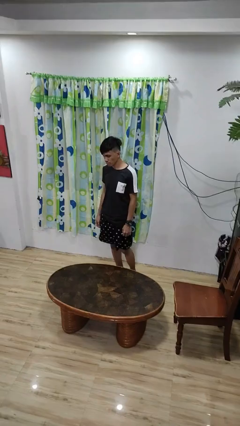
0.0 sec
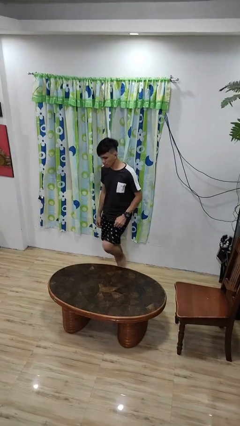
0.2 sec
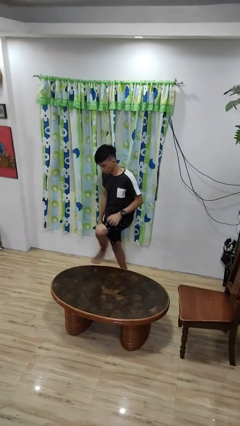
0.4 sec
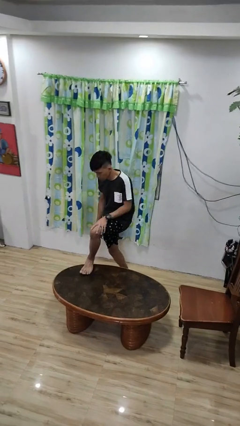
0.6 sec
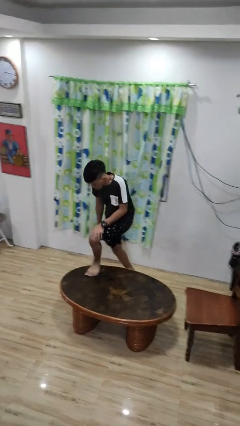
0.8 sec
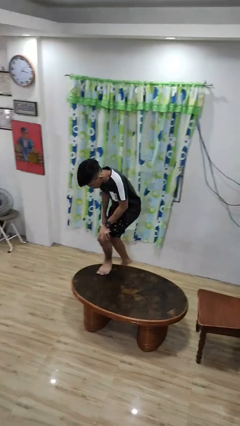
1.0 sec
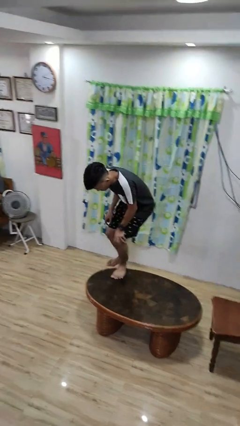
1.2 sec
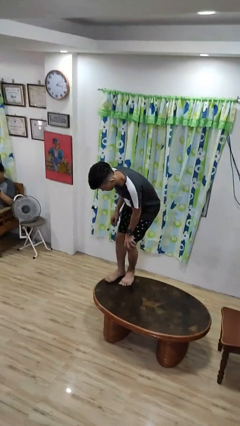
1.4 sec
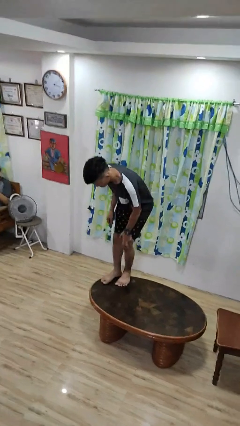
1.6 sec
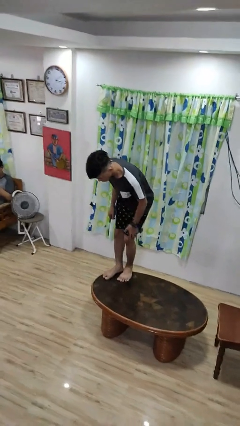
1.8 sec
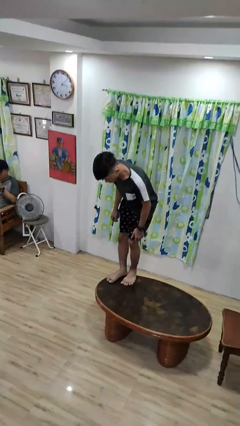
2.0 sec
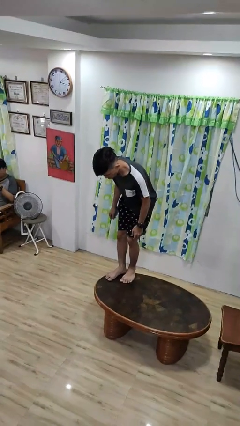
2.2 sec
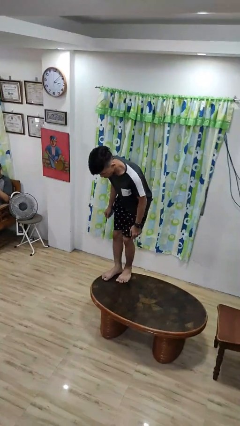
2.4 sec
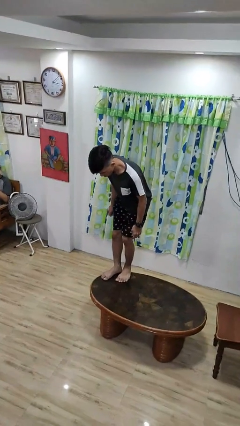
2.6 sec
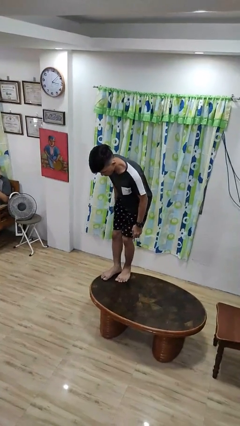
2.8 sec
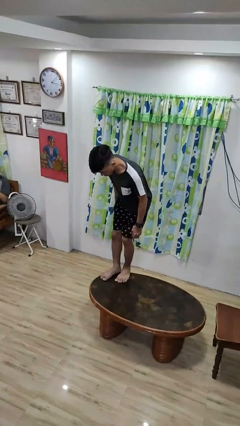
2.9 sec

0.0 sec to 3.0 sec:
person climbs on table

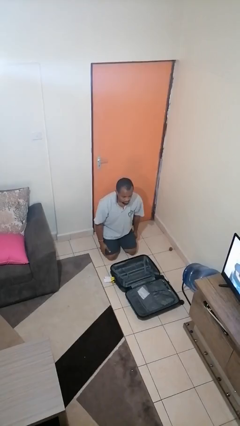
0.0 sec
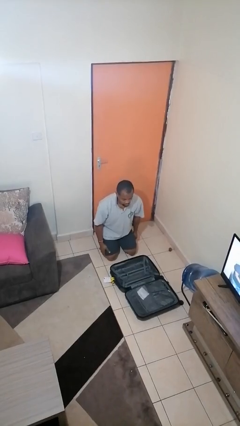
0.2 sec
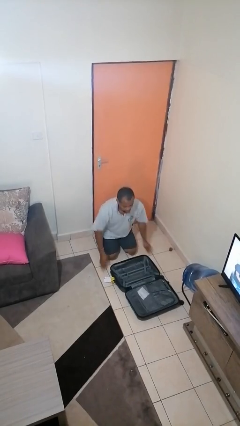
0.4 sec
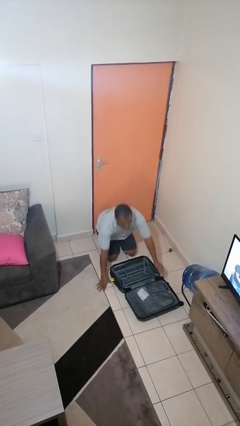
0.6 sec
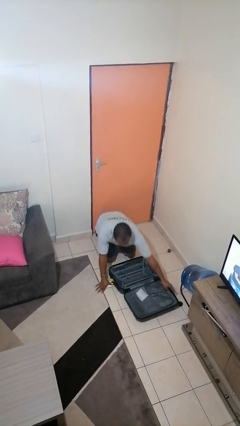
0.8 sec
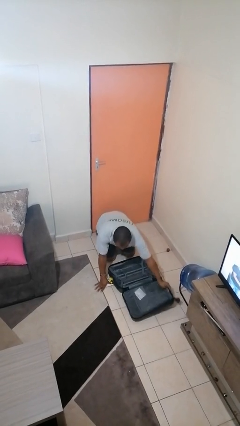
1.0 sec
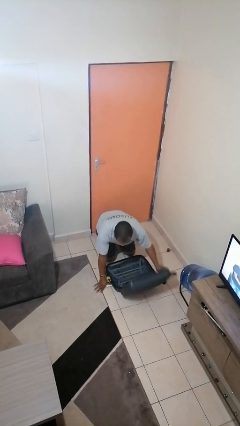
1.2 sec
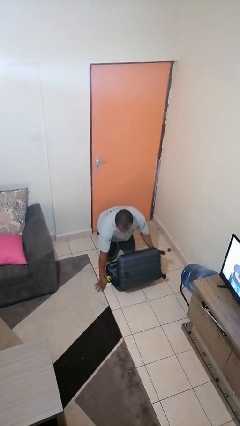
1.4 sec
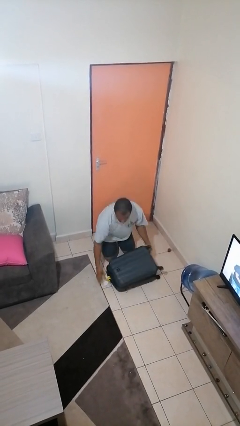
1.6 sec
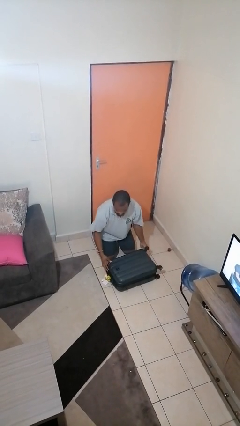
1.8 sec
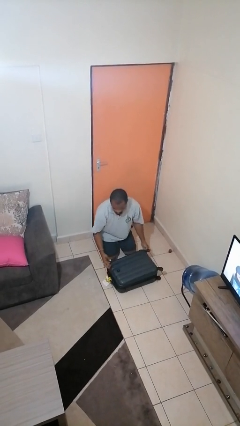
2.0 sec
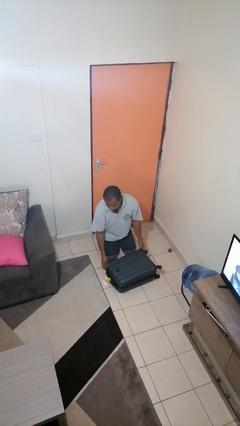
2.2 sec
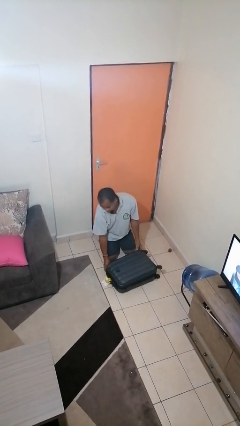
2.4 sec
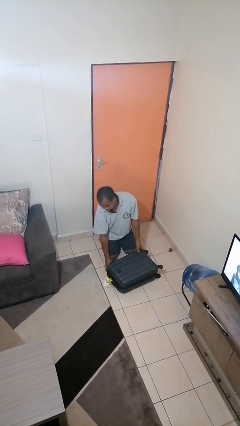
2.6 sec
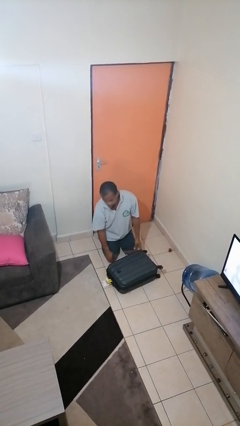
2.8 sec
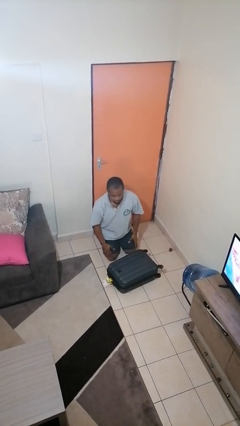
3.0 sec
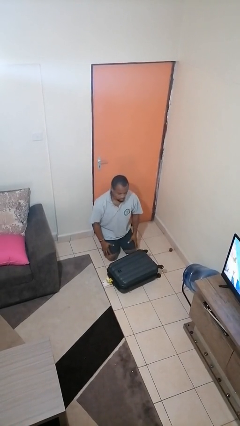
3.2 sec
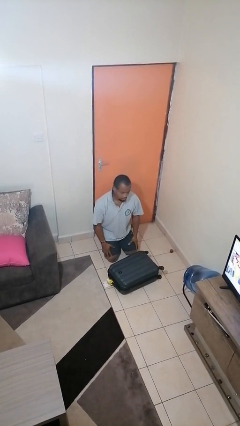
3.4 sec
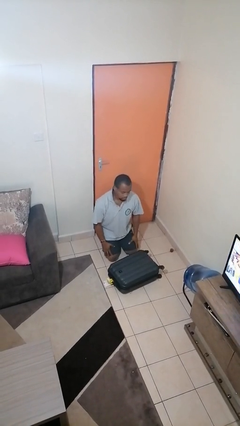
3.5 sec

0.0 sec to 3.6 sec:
person closes suitcase

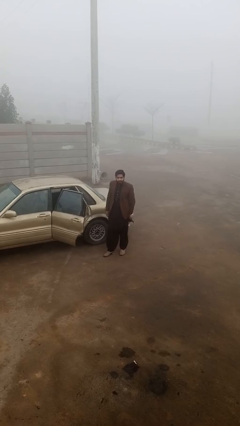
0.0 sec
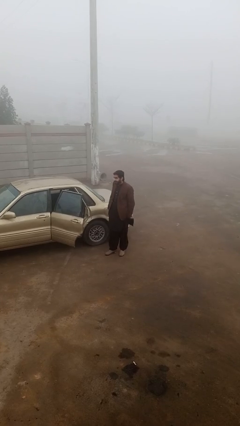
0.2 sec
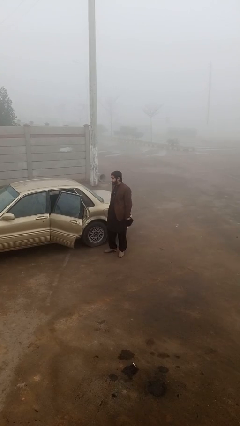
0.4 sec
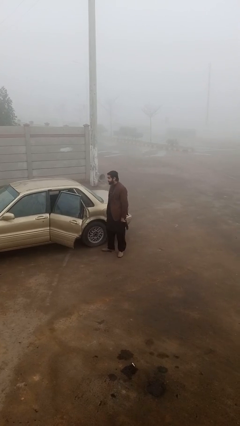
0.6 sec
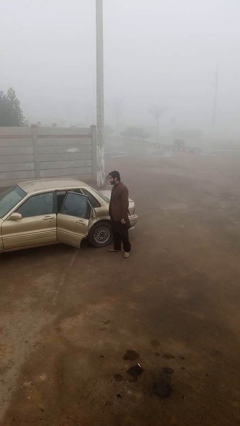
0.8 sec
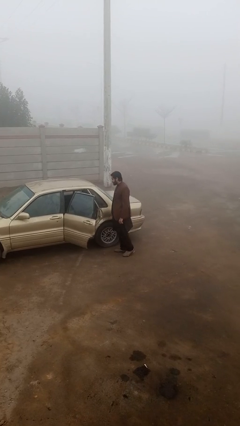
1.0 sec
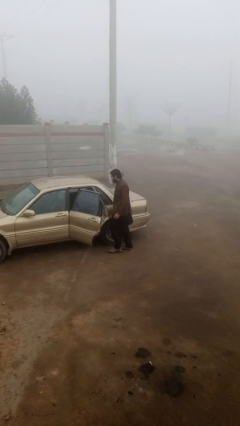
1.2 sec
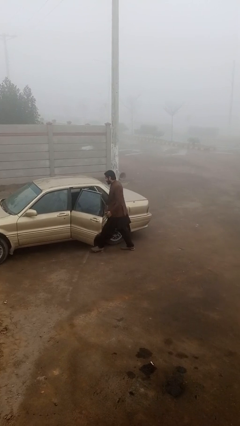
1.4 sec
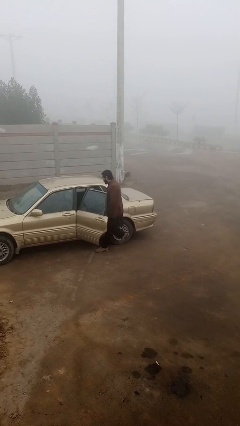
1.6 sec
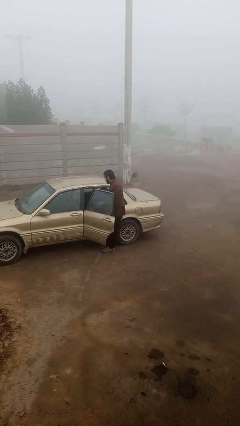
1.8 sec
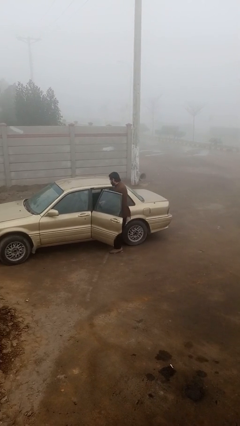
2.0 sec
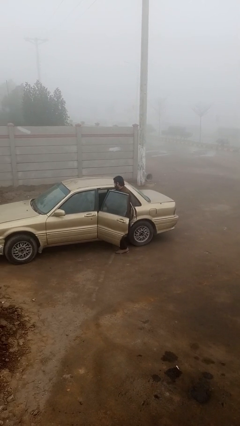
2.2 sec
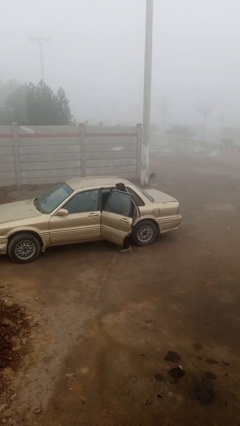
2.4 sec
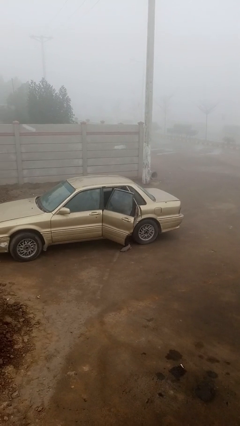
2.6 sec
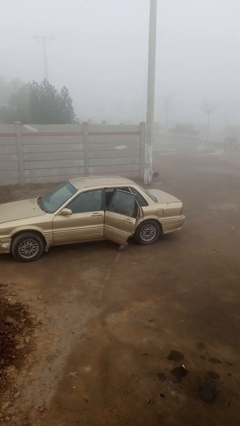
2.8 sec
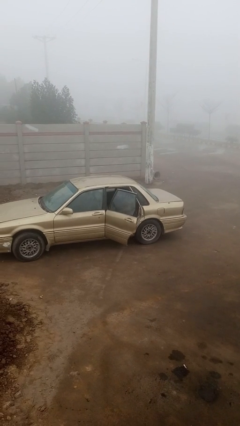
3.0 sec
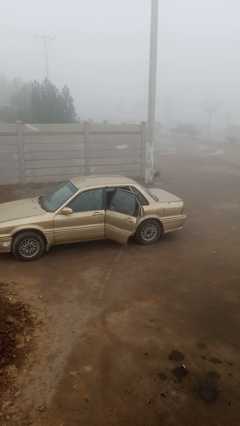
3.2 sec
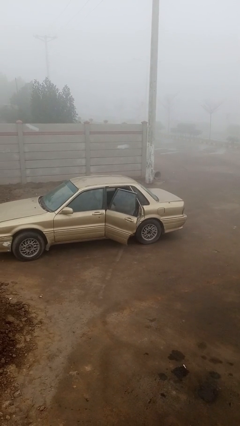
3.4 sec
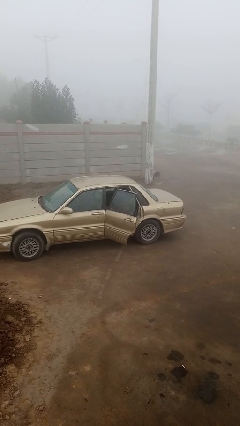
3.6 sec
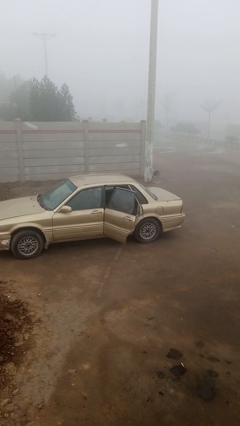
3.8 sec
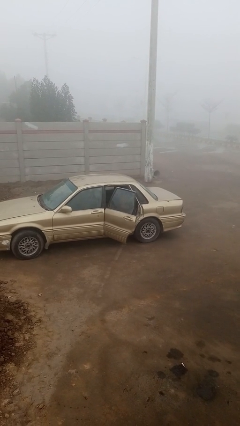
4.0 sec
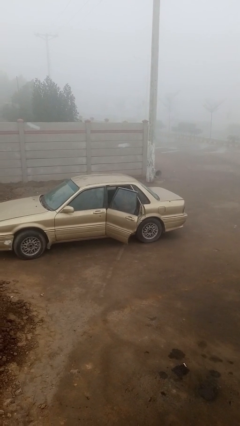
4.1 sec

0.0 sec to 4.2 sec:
person enters car

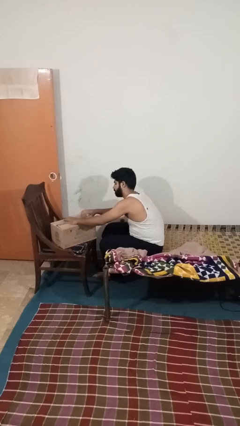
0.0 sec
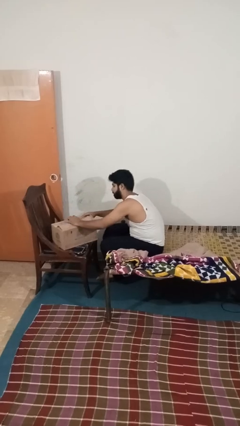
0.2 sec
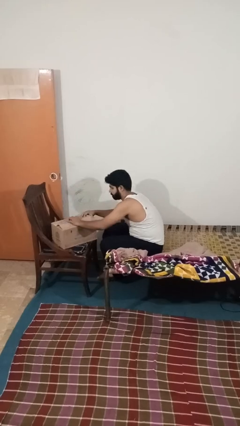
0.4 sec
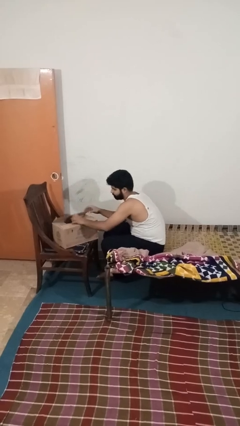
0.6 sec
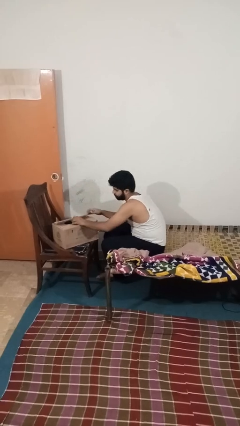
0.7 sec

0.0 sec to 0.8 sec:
person opens box

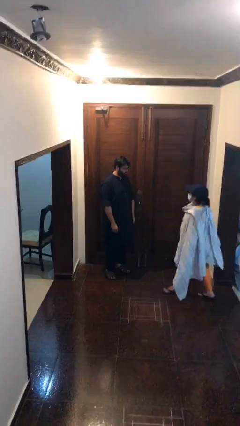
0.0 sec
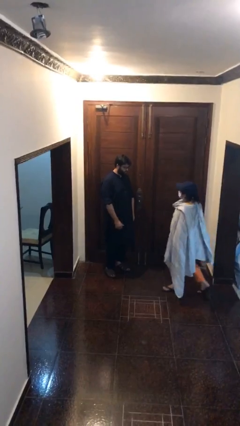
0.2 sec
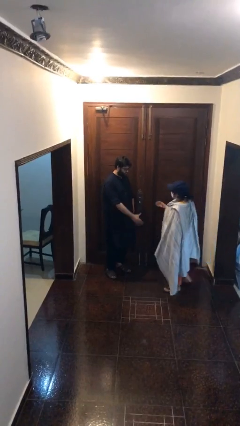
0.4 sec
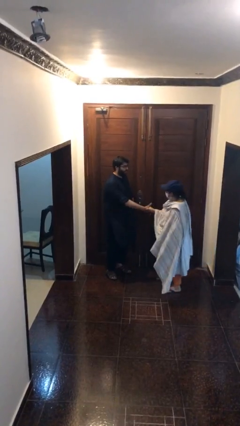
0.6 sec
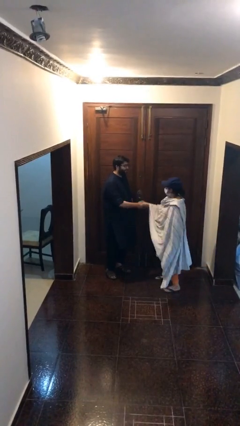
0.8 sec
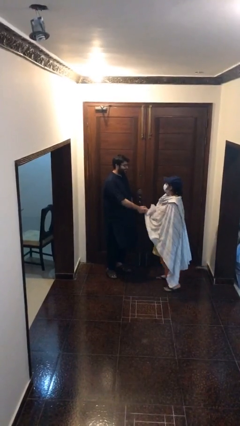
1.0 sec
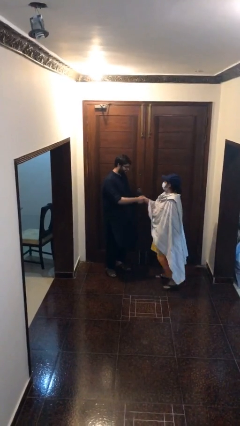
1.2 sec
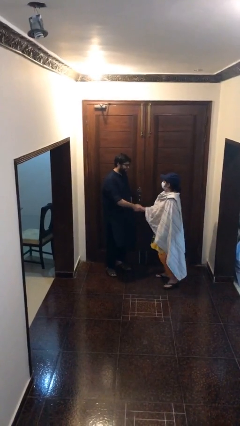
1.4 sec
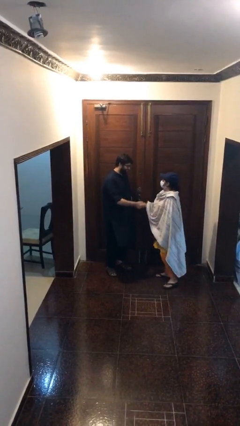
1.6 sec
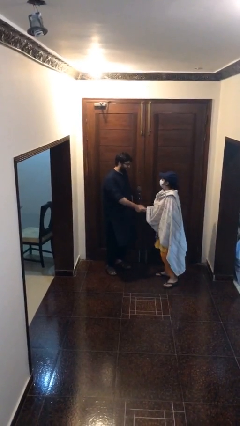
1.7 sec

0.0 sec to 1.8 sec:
person shakes hand

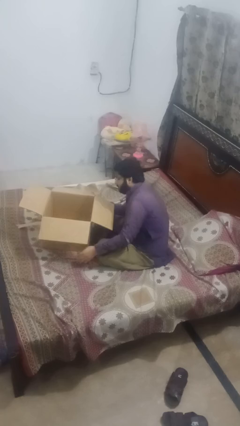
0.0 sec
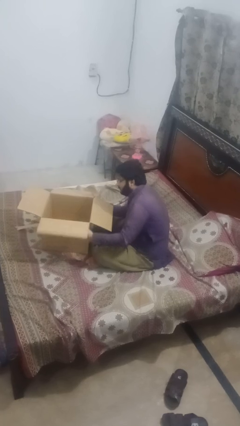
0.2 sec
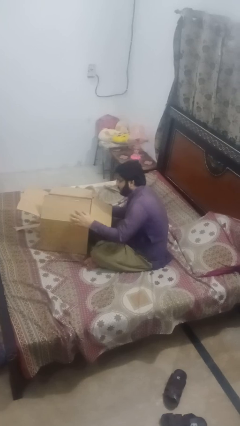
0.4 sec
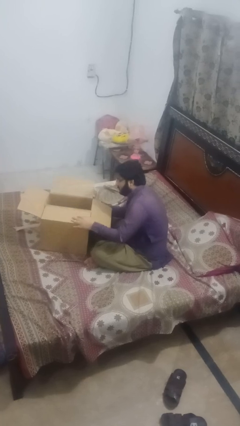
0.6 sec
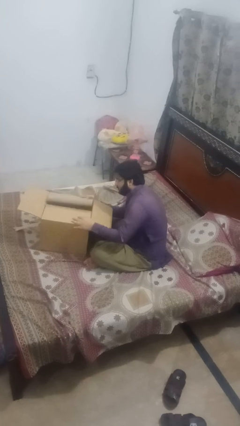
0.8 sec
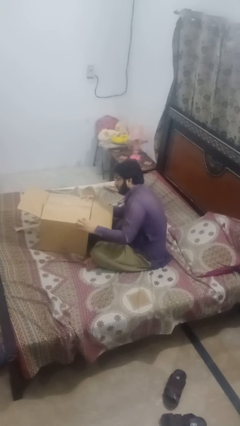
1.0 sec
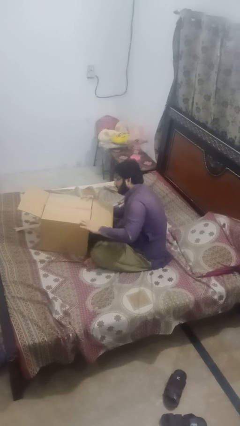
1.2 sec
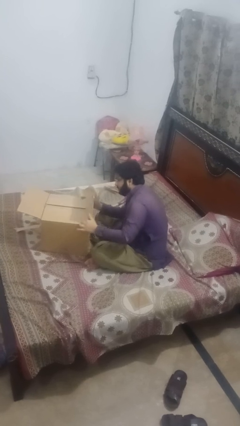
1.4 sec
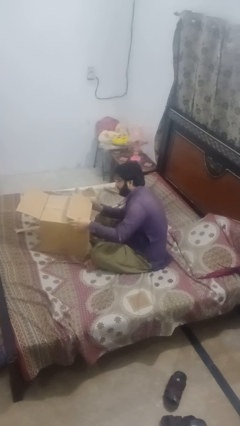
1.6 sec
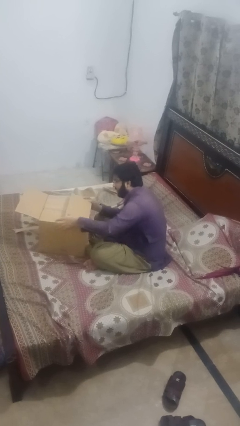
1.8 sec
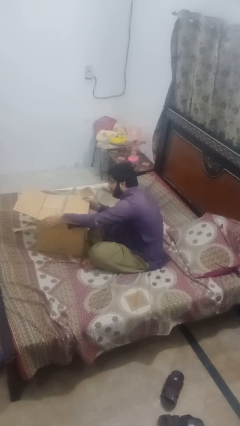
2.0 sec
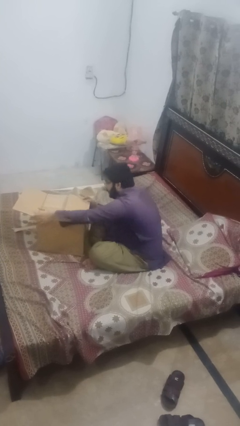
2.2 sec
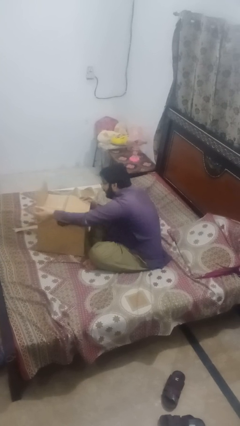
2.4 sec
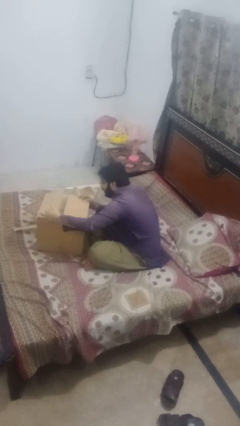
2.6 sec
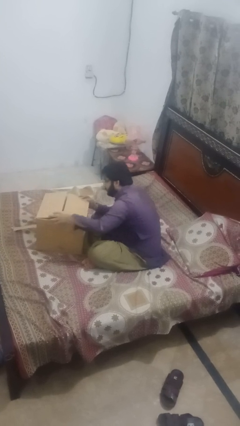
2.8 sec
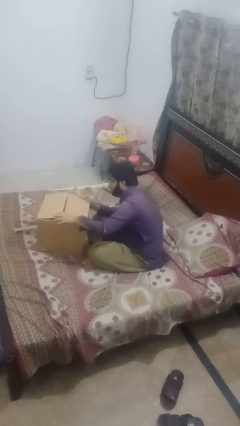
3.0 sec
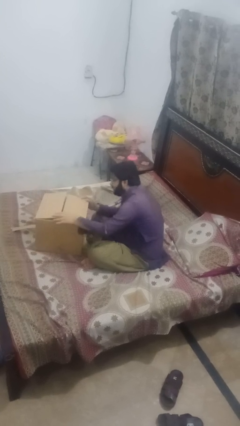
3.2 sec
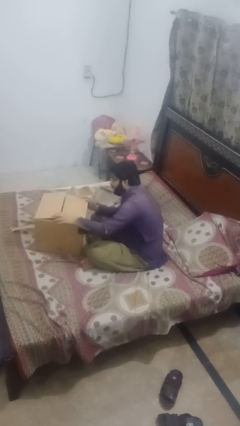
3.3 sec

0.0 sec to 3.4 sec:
person closes box

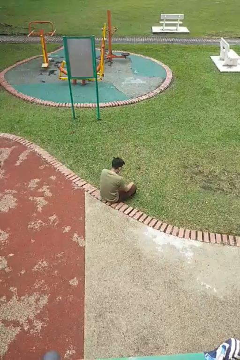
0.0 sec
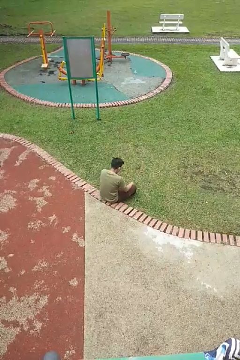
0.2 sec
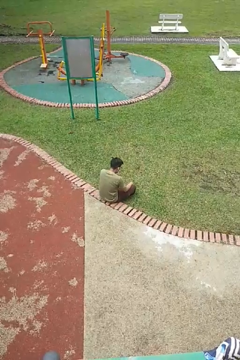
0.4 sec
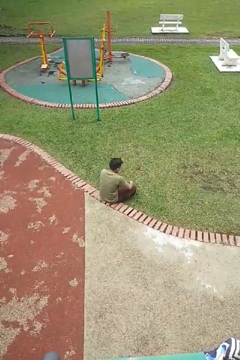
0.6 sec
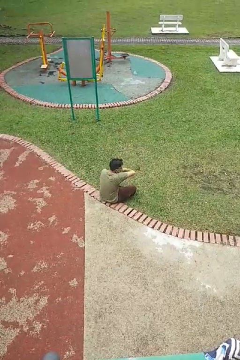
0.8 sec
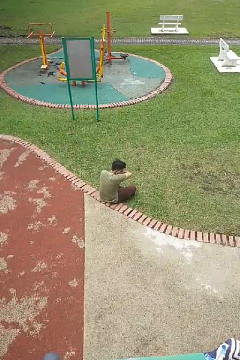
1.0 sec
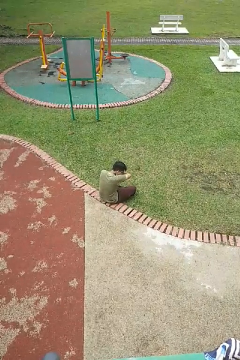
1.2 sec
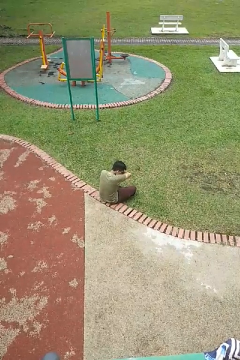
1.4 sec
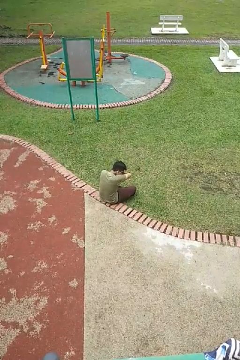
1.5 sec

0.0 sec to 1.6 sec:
person sneezes into arm
